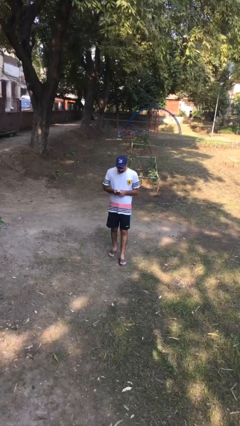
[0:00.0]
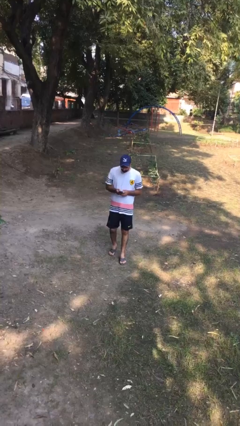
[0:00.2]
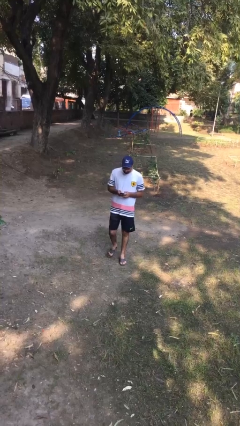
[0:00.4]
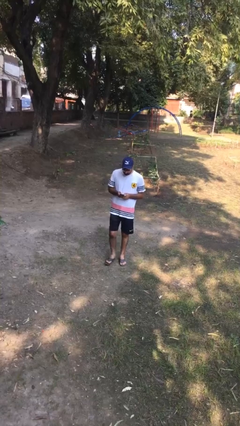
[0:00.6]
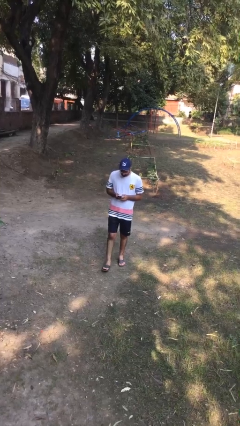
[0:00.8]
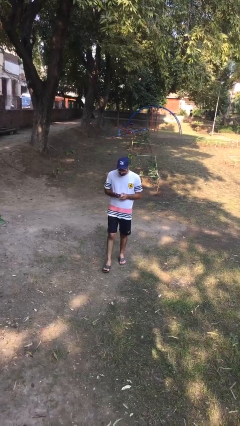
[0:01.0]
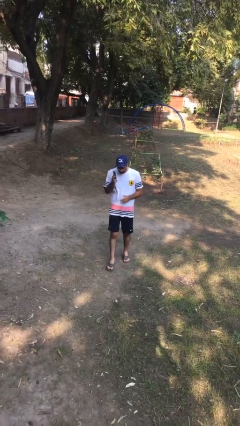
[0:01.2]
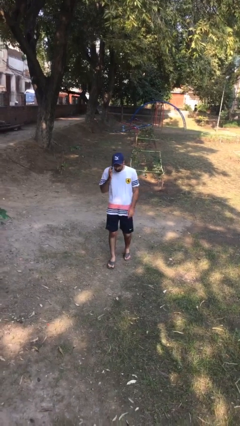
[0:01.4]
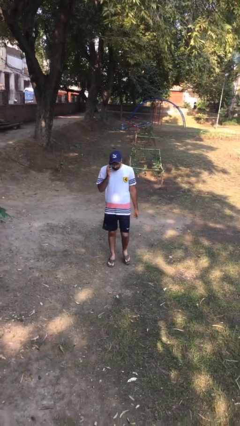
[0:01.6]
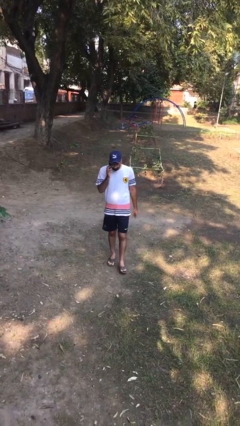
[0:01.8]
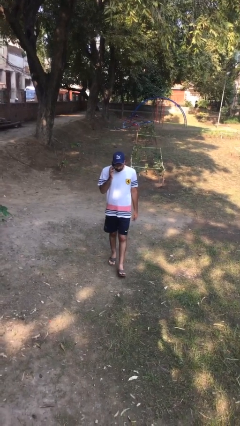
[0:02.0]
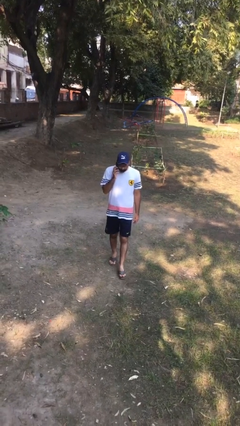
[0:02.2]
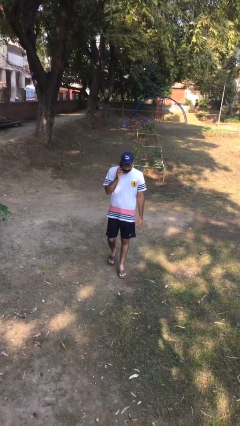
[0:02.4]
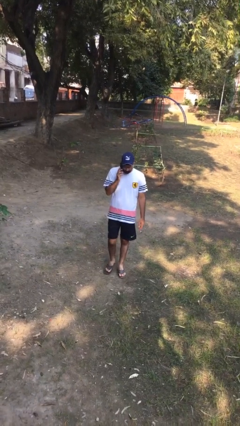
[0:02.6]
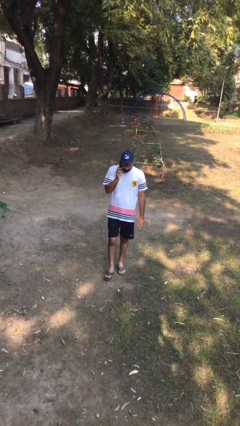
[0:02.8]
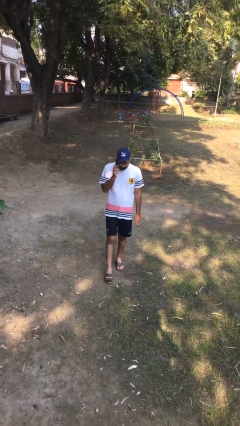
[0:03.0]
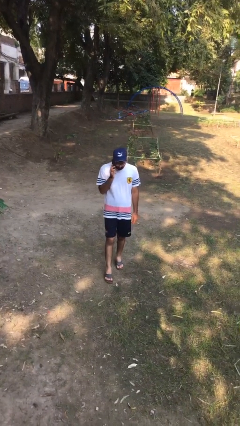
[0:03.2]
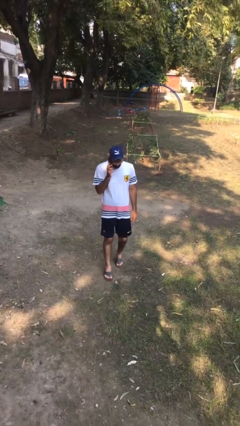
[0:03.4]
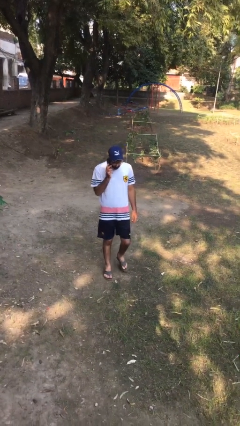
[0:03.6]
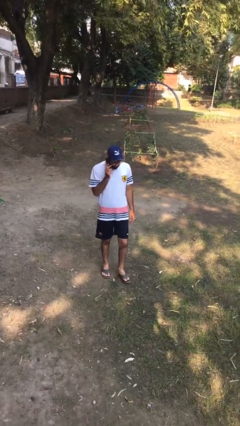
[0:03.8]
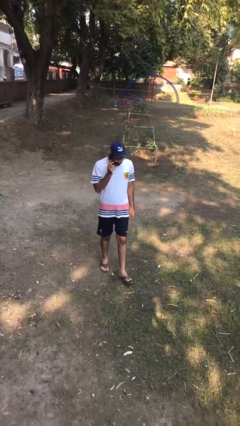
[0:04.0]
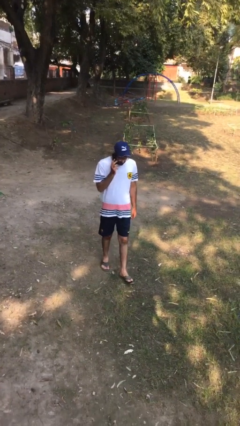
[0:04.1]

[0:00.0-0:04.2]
person talks on phone

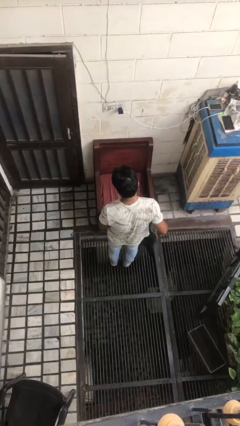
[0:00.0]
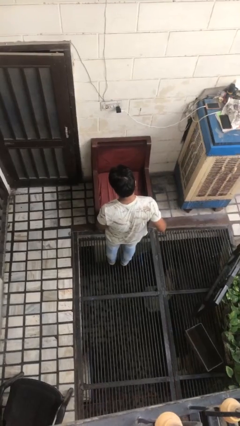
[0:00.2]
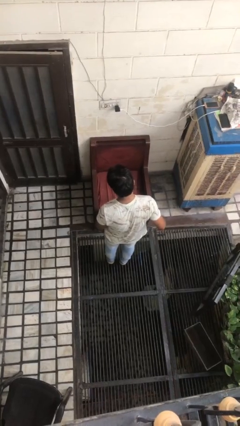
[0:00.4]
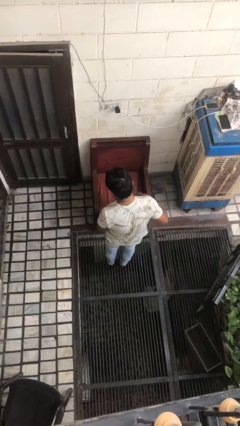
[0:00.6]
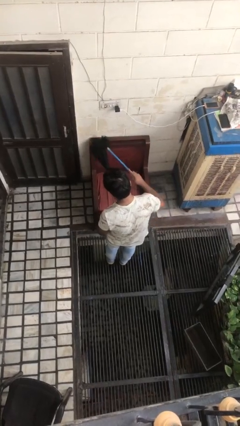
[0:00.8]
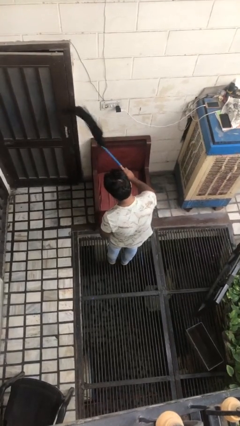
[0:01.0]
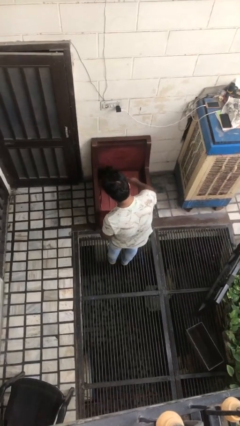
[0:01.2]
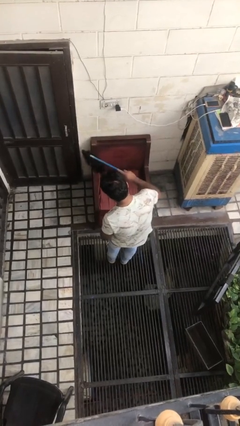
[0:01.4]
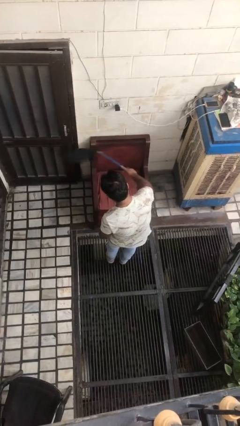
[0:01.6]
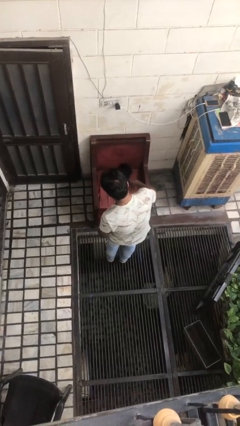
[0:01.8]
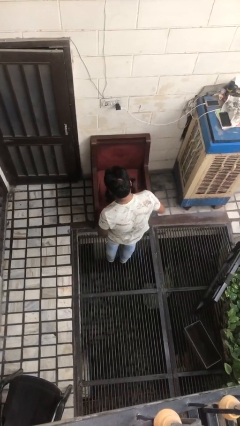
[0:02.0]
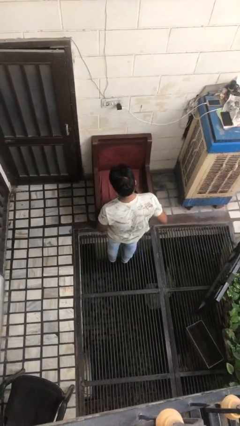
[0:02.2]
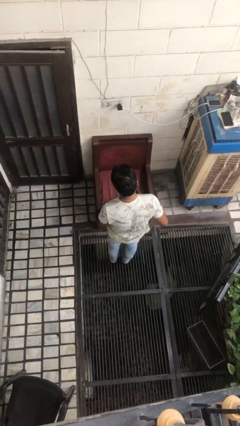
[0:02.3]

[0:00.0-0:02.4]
person dusts furniture

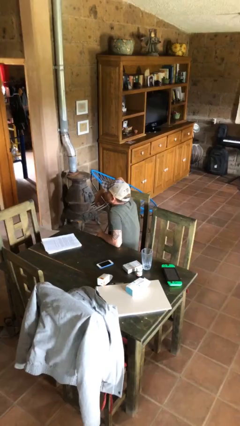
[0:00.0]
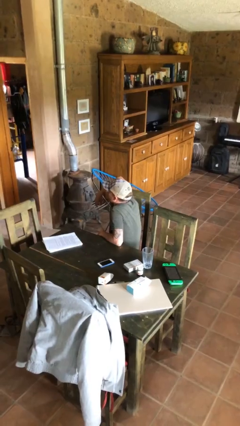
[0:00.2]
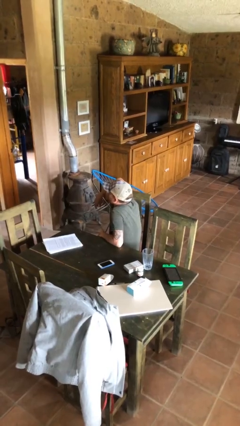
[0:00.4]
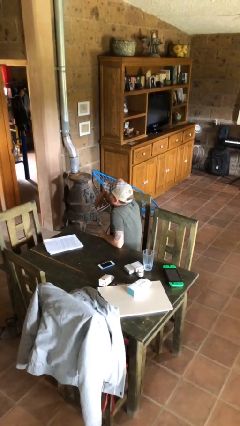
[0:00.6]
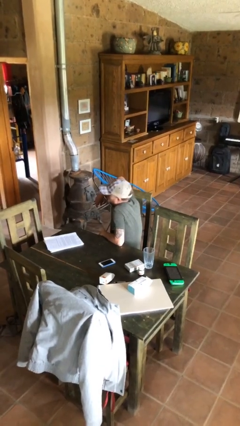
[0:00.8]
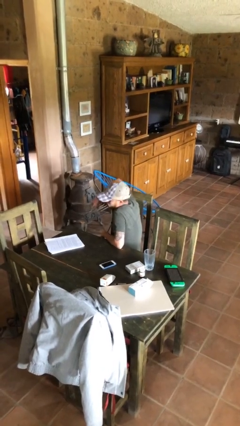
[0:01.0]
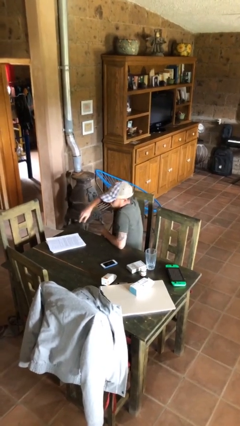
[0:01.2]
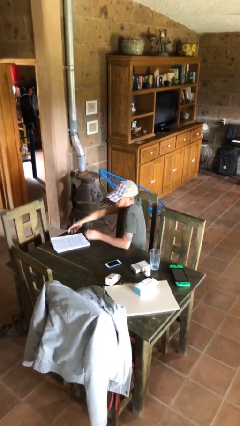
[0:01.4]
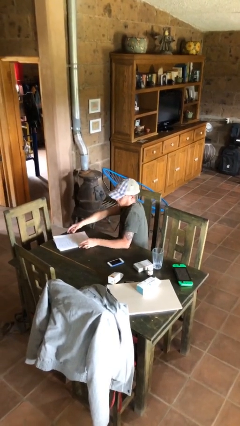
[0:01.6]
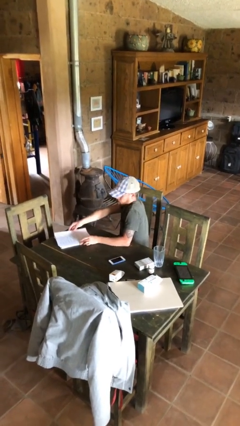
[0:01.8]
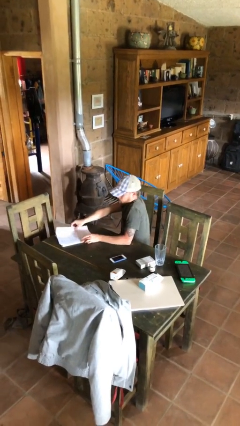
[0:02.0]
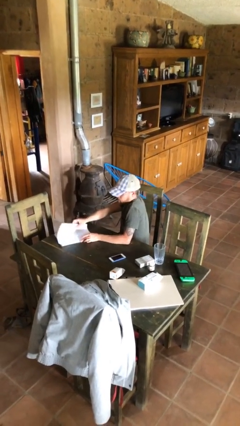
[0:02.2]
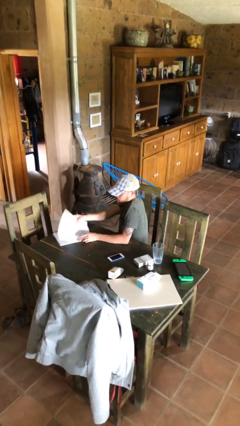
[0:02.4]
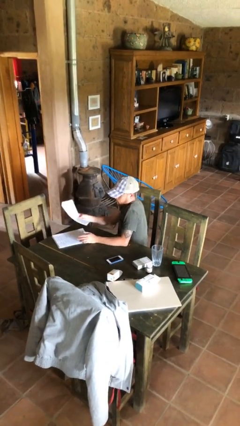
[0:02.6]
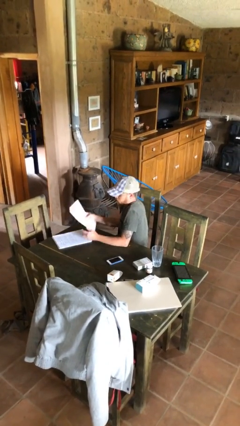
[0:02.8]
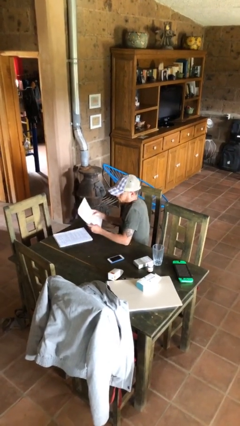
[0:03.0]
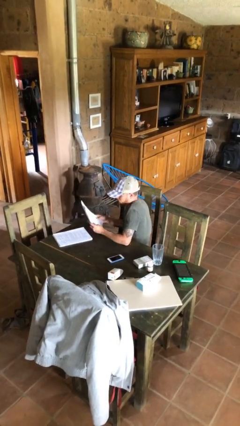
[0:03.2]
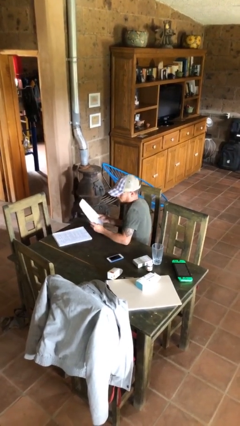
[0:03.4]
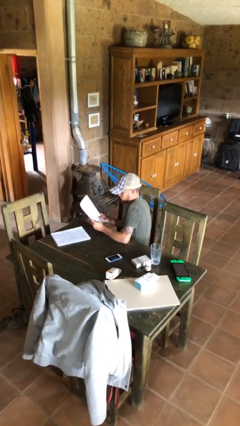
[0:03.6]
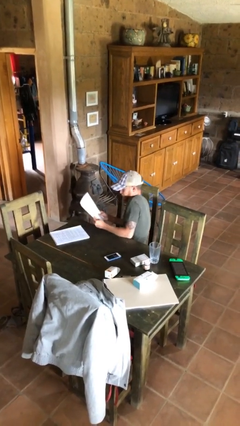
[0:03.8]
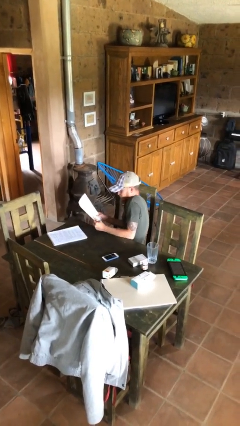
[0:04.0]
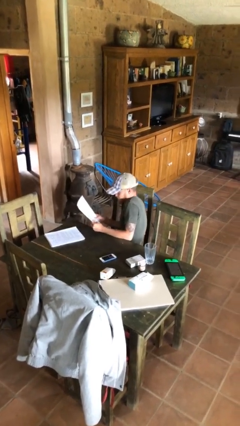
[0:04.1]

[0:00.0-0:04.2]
person picks up object from table

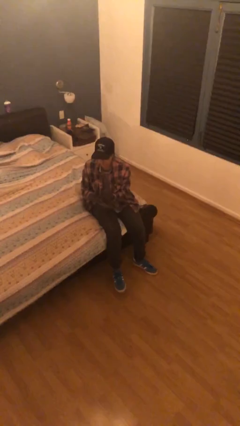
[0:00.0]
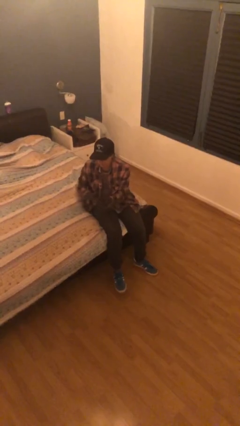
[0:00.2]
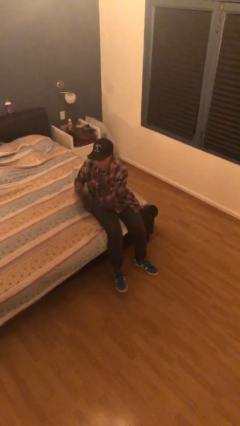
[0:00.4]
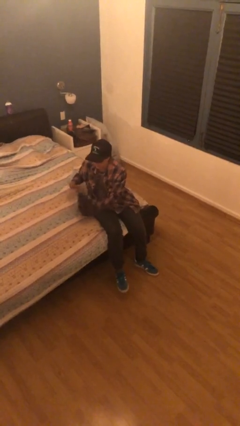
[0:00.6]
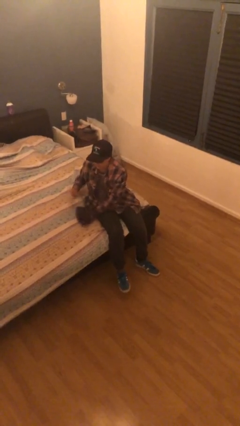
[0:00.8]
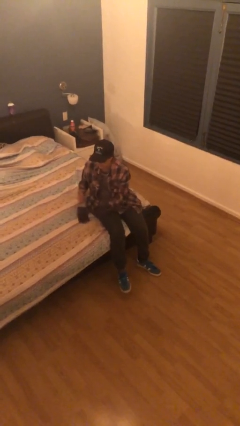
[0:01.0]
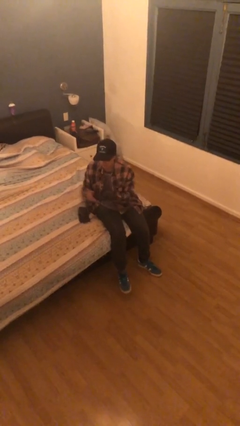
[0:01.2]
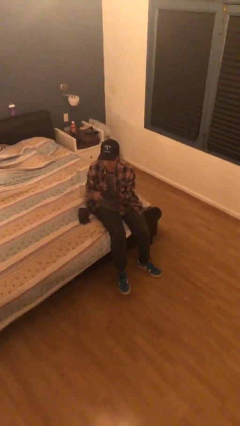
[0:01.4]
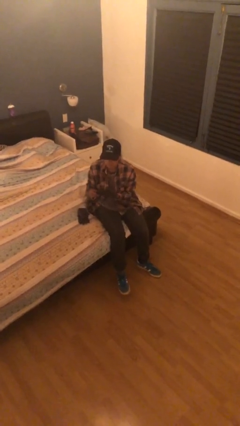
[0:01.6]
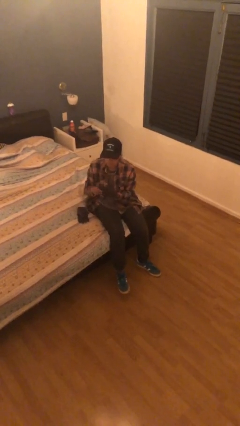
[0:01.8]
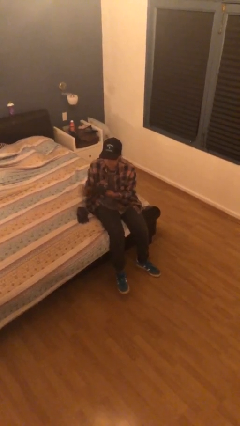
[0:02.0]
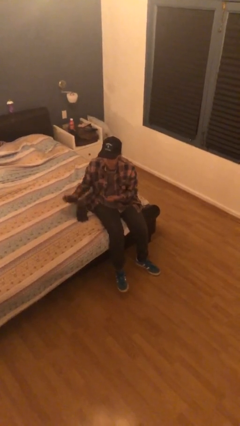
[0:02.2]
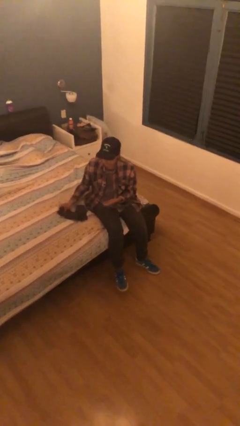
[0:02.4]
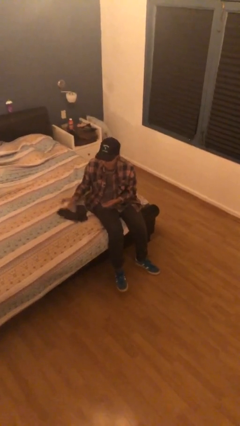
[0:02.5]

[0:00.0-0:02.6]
person takes off gloves

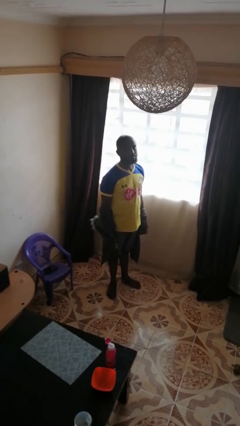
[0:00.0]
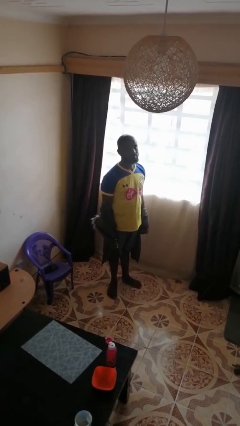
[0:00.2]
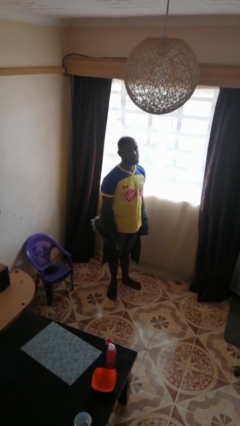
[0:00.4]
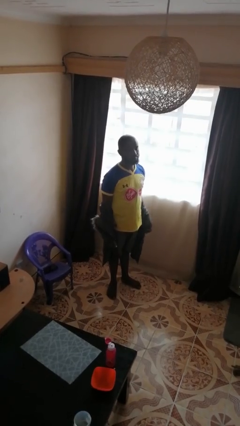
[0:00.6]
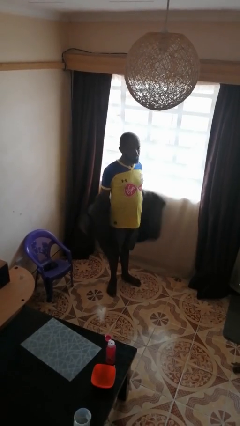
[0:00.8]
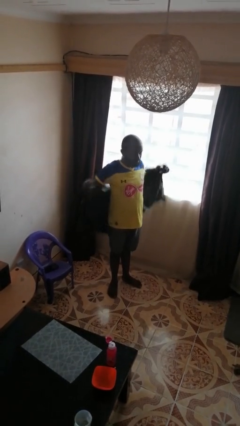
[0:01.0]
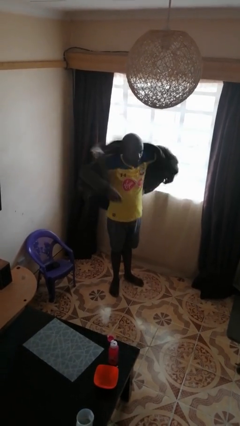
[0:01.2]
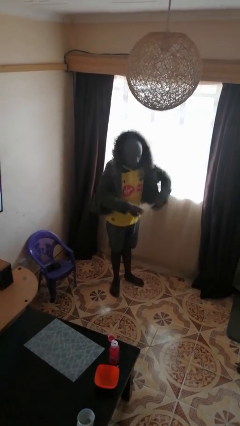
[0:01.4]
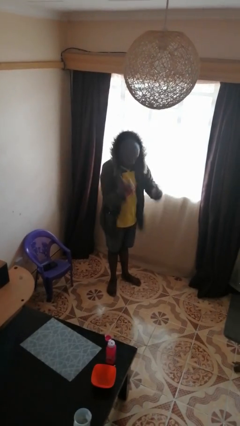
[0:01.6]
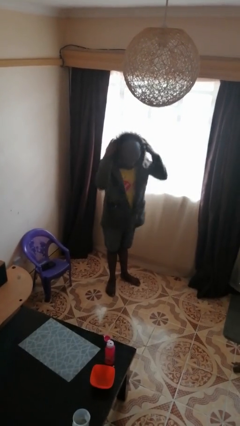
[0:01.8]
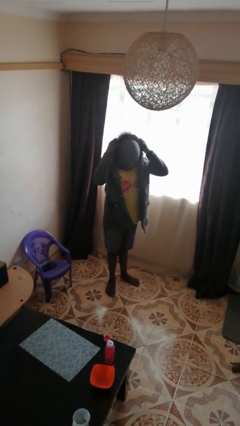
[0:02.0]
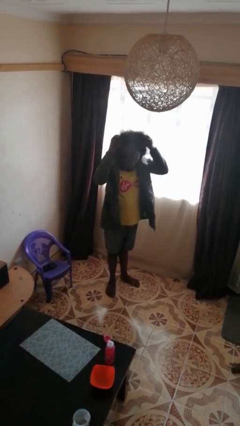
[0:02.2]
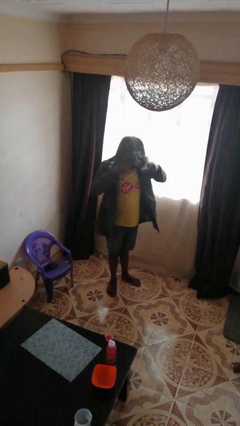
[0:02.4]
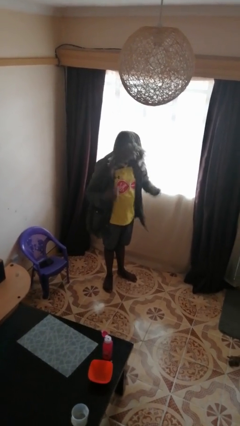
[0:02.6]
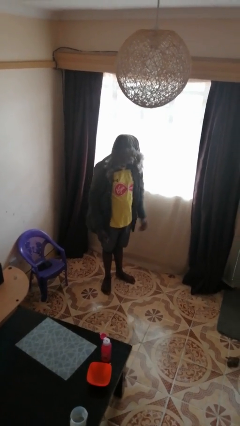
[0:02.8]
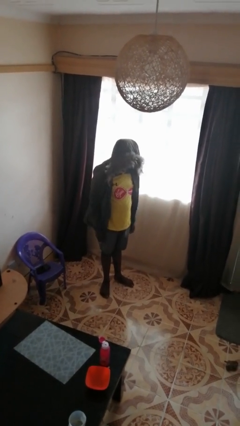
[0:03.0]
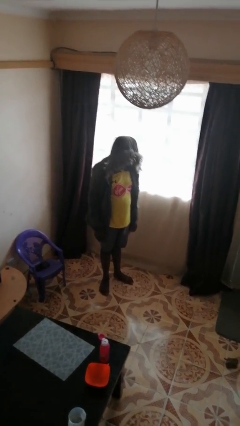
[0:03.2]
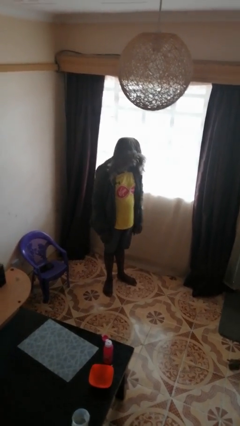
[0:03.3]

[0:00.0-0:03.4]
person puts on hoodie

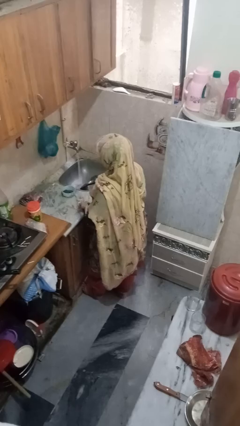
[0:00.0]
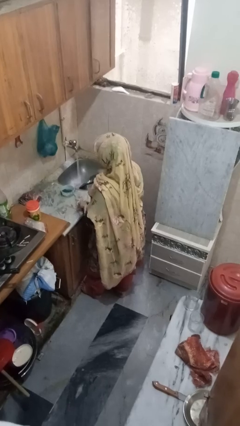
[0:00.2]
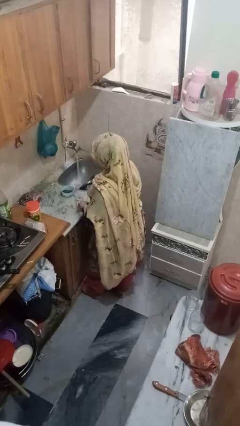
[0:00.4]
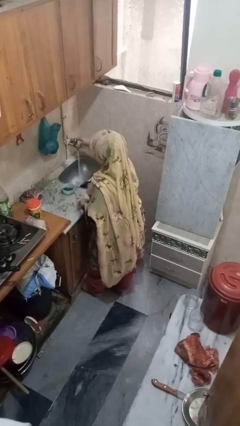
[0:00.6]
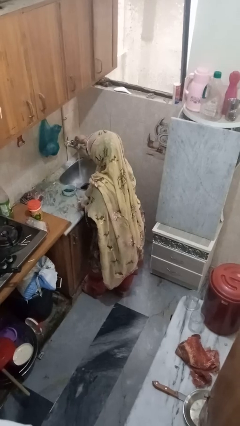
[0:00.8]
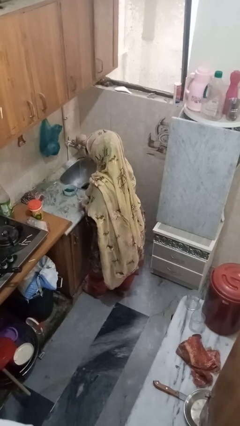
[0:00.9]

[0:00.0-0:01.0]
person turns off faucet
